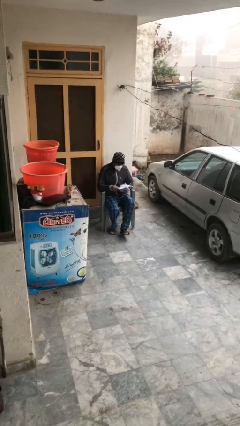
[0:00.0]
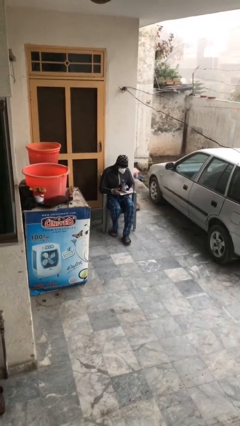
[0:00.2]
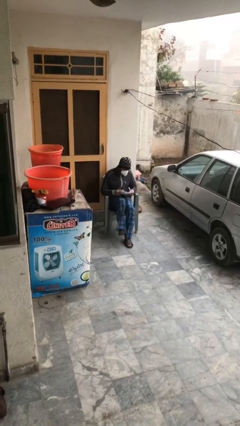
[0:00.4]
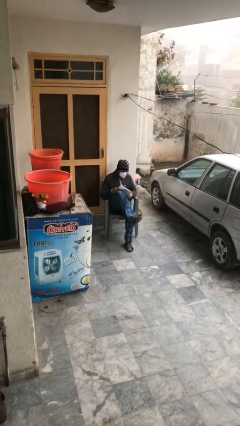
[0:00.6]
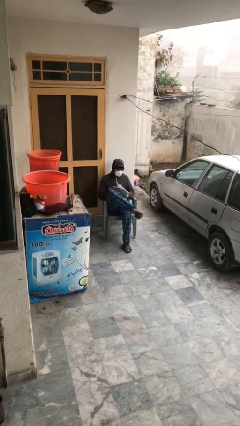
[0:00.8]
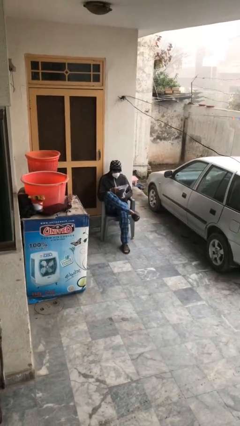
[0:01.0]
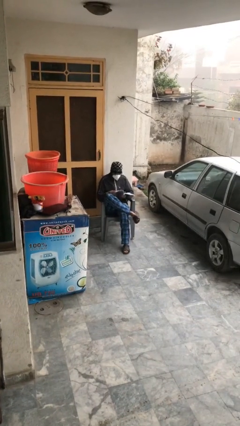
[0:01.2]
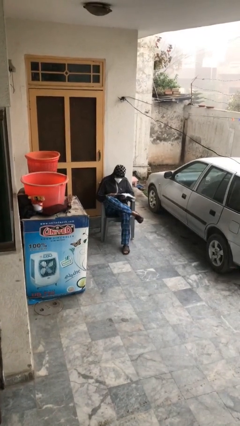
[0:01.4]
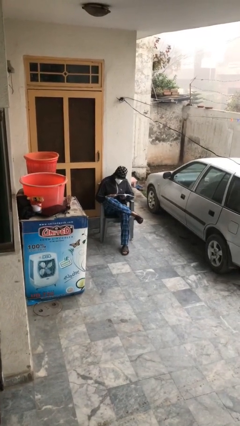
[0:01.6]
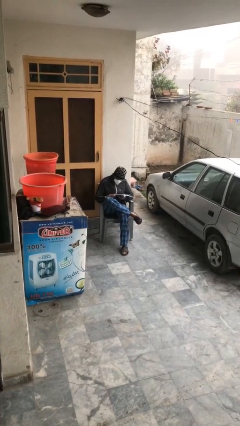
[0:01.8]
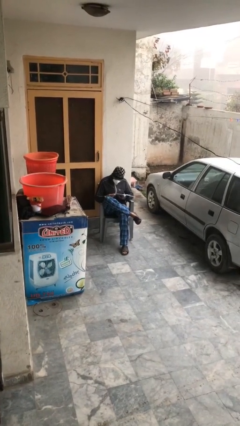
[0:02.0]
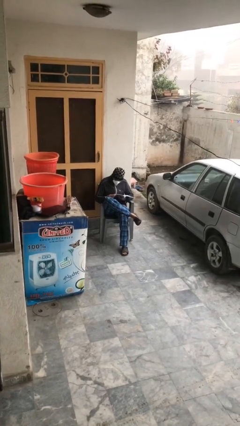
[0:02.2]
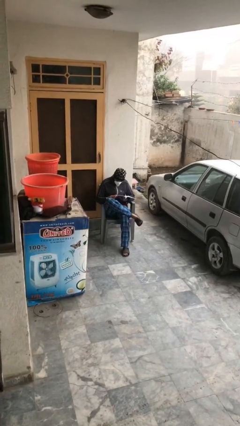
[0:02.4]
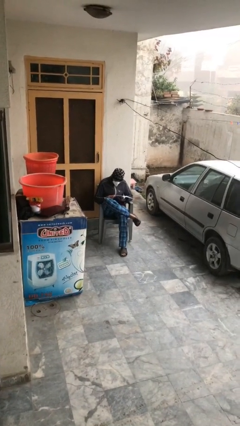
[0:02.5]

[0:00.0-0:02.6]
person reads document

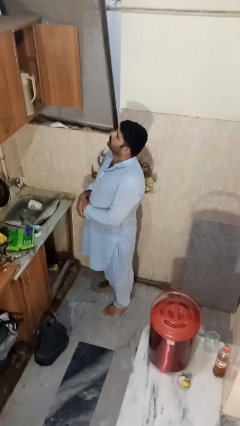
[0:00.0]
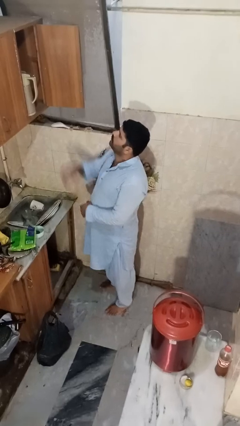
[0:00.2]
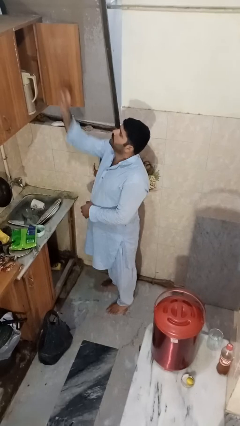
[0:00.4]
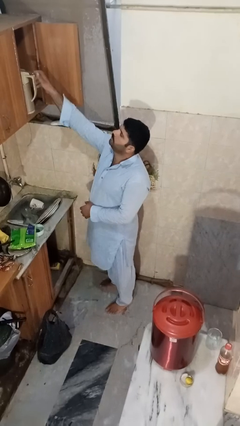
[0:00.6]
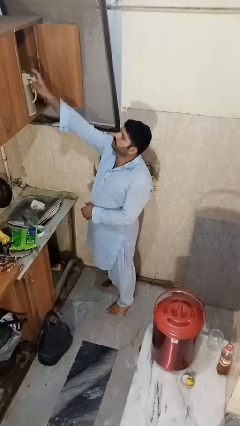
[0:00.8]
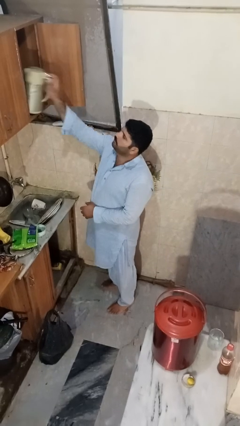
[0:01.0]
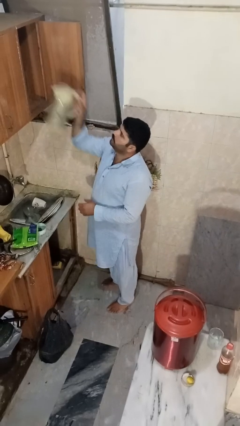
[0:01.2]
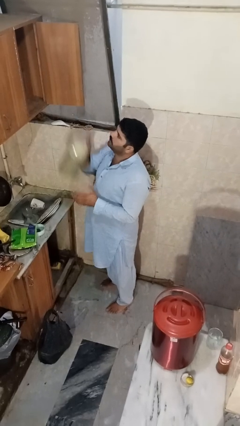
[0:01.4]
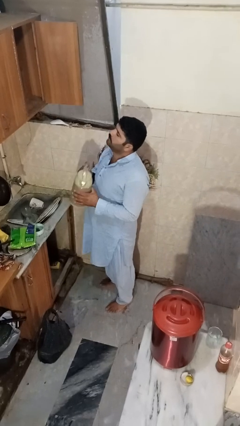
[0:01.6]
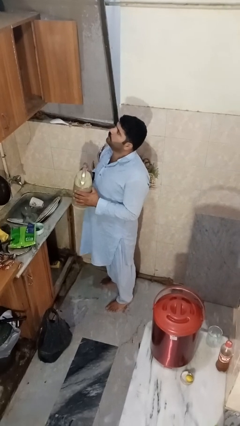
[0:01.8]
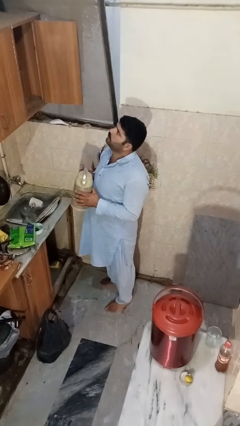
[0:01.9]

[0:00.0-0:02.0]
person takes object from cabinet

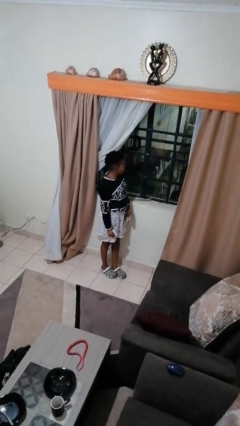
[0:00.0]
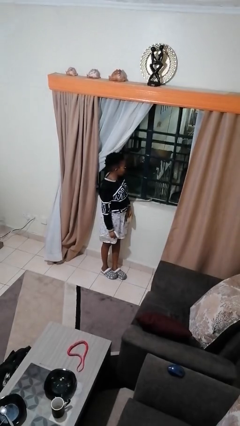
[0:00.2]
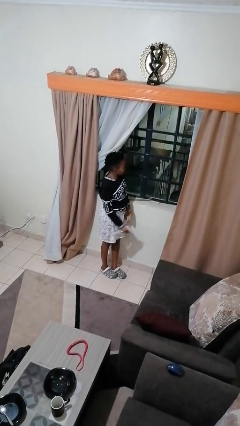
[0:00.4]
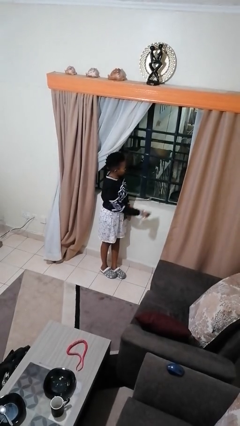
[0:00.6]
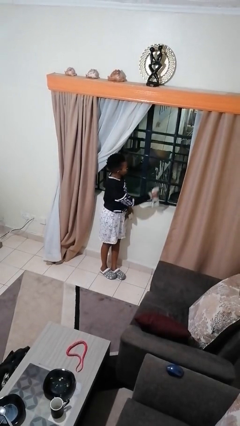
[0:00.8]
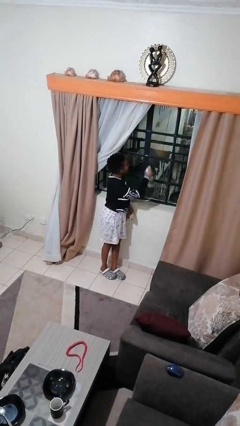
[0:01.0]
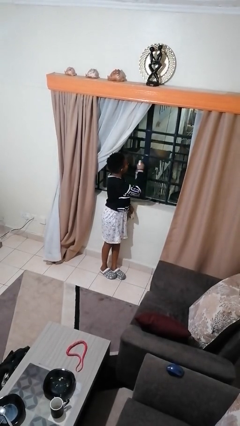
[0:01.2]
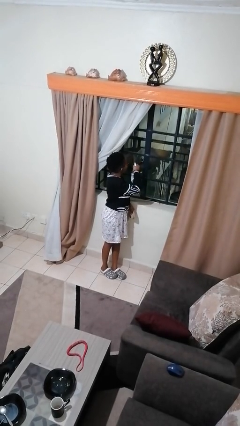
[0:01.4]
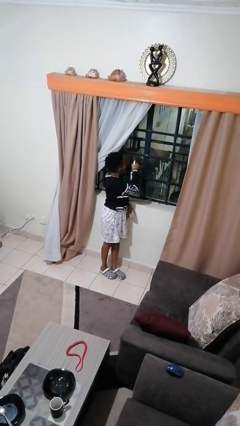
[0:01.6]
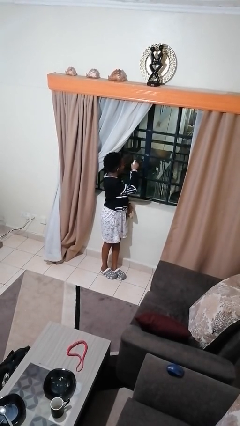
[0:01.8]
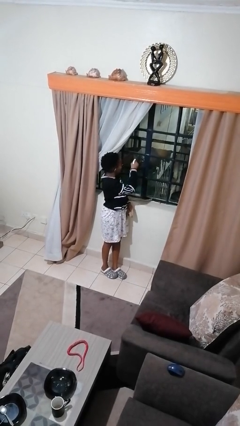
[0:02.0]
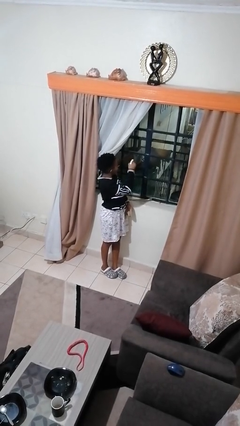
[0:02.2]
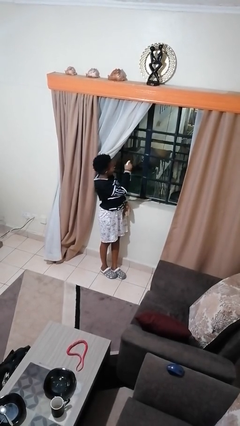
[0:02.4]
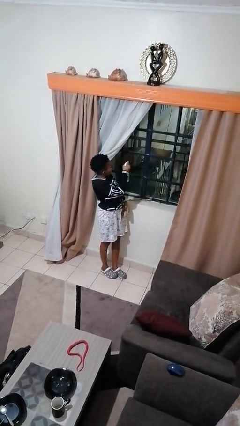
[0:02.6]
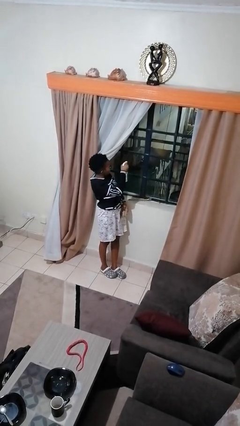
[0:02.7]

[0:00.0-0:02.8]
person sprays from bottle
